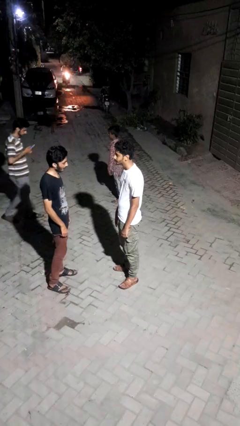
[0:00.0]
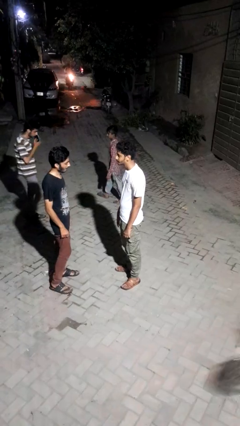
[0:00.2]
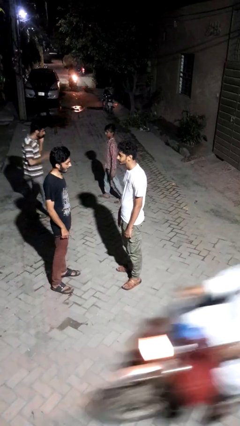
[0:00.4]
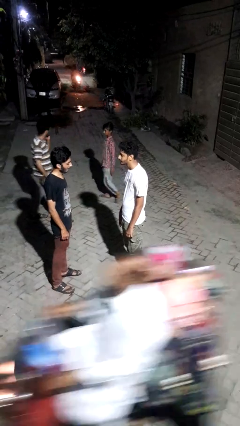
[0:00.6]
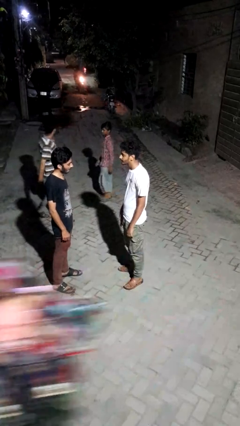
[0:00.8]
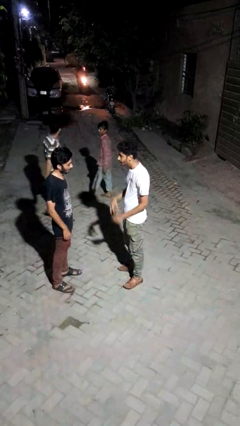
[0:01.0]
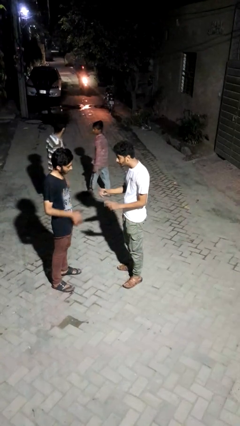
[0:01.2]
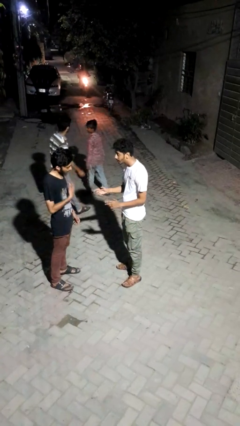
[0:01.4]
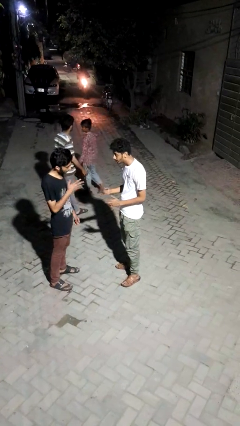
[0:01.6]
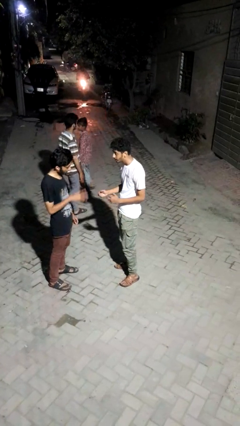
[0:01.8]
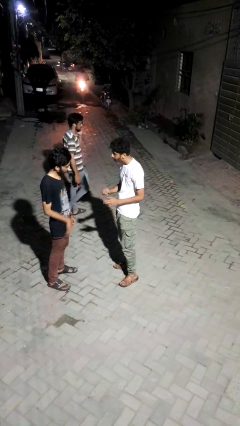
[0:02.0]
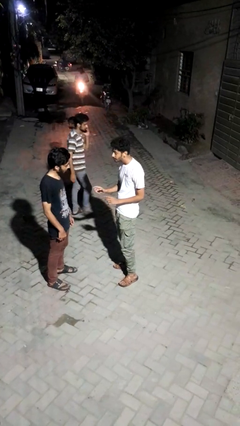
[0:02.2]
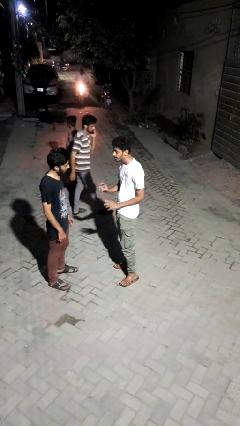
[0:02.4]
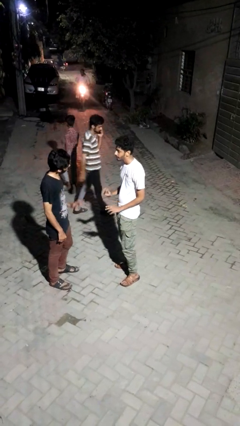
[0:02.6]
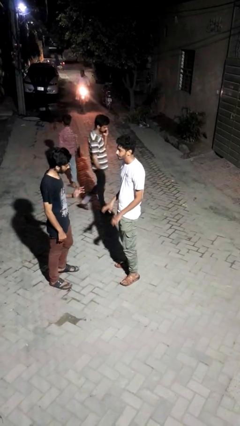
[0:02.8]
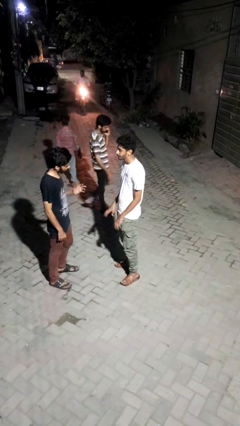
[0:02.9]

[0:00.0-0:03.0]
person talks to person

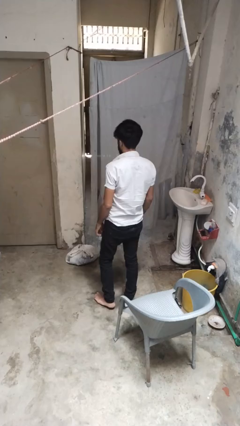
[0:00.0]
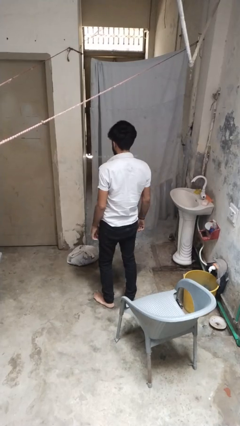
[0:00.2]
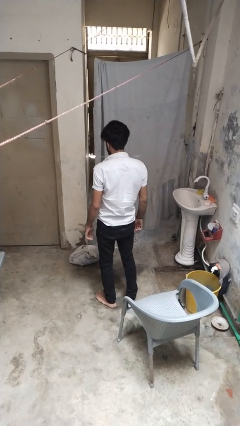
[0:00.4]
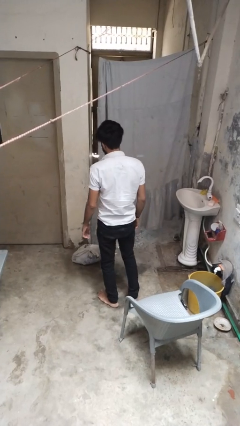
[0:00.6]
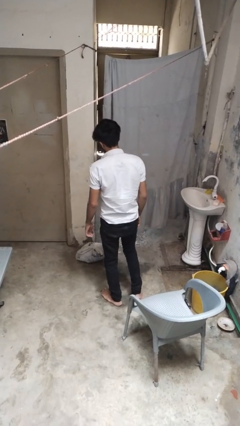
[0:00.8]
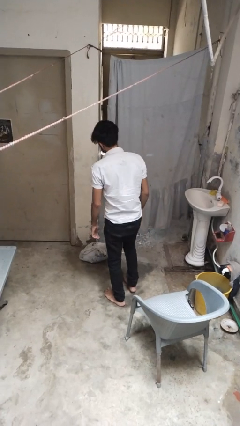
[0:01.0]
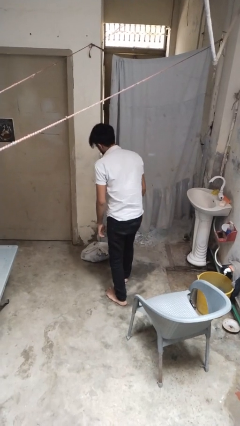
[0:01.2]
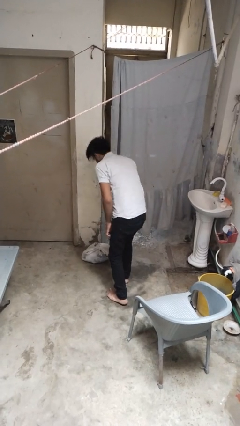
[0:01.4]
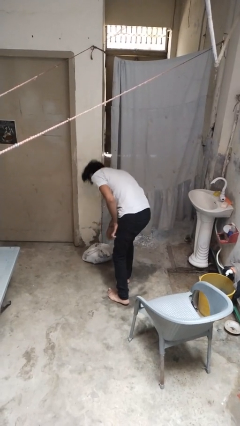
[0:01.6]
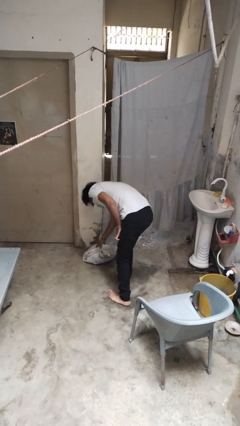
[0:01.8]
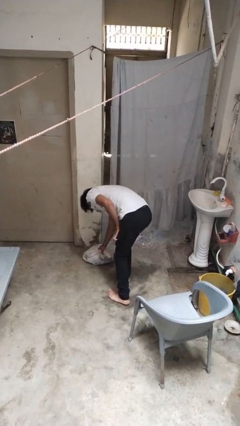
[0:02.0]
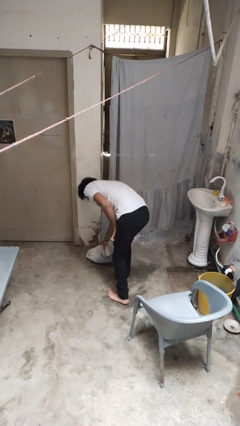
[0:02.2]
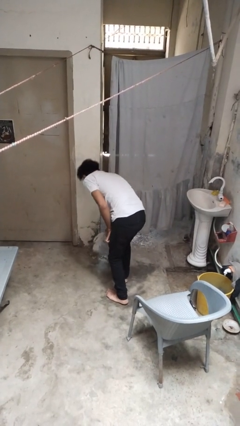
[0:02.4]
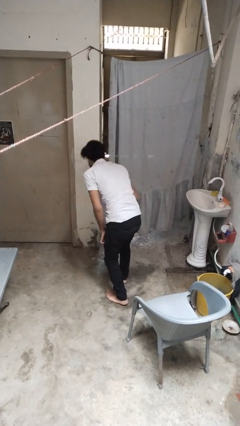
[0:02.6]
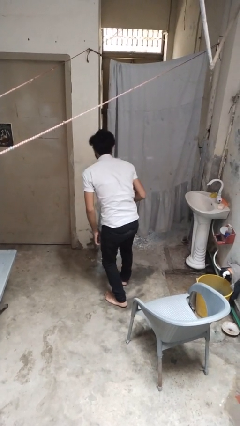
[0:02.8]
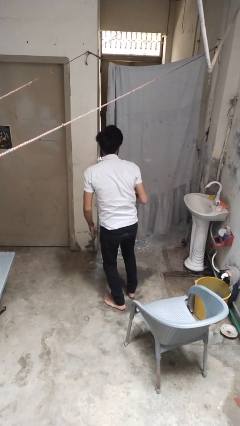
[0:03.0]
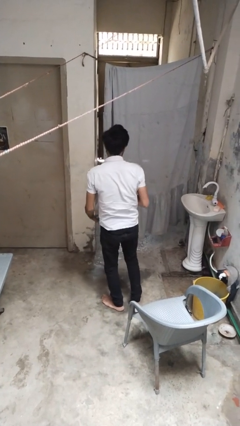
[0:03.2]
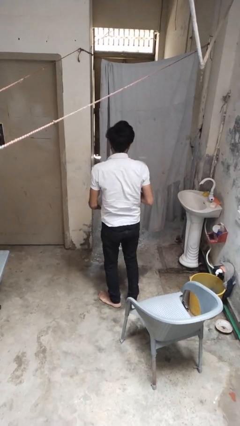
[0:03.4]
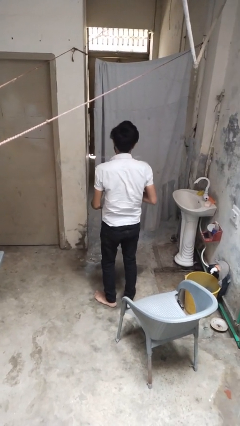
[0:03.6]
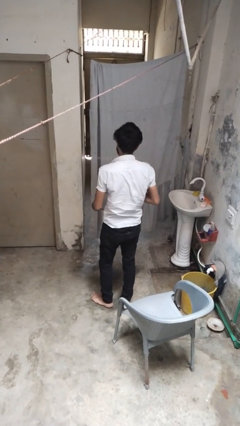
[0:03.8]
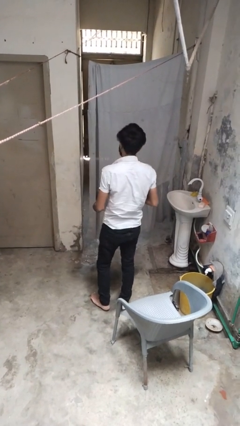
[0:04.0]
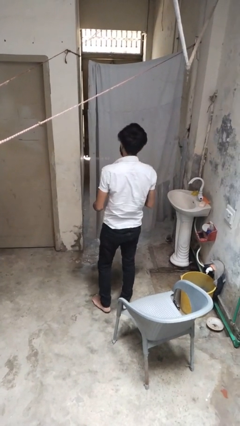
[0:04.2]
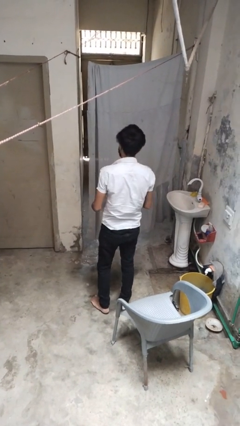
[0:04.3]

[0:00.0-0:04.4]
person picks up object from floor

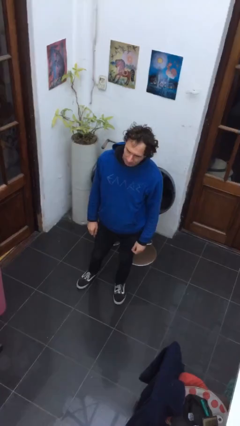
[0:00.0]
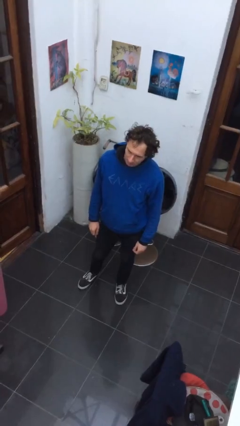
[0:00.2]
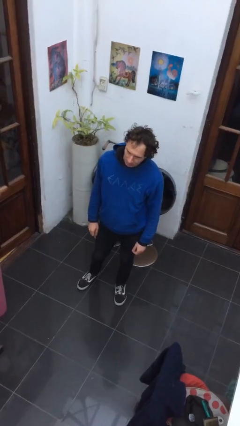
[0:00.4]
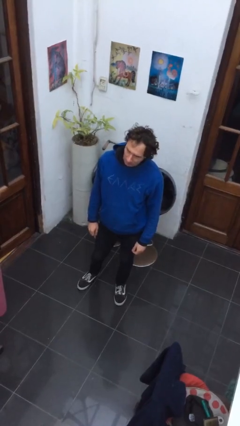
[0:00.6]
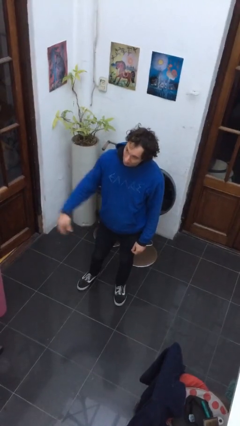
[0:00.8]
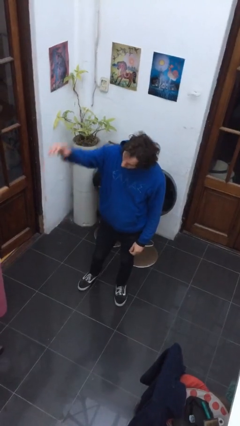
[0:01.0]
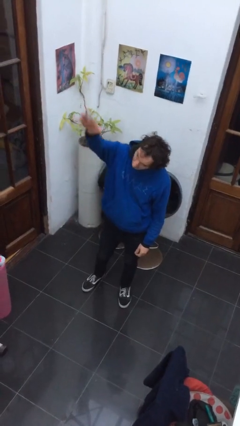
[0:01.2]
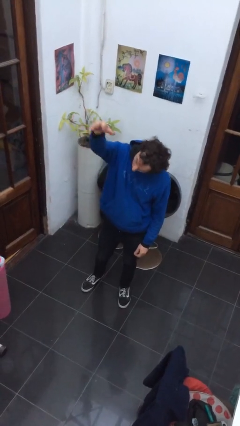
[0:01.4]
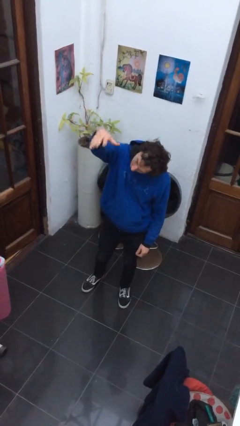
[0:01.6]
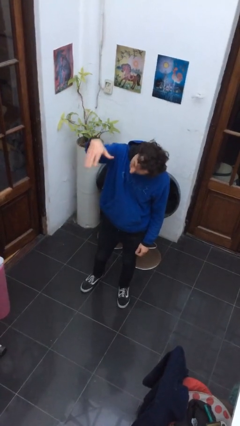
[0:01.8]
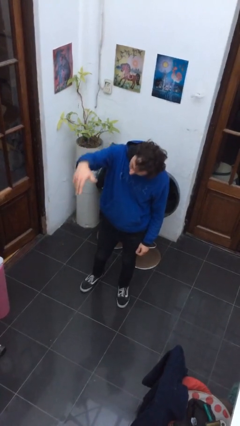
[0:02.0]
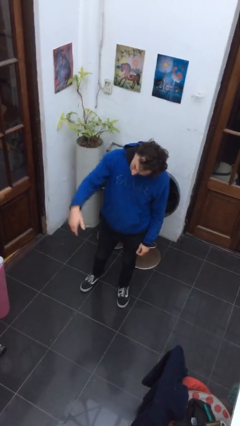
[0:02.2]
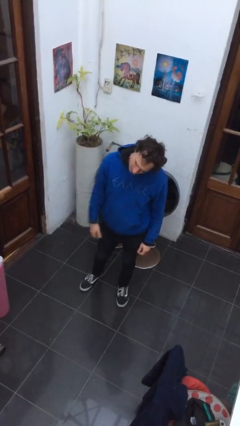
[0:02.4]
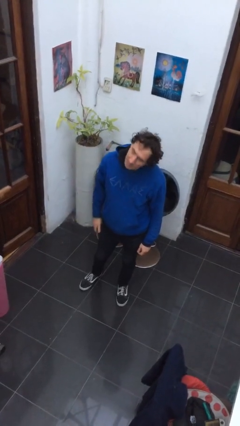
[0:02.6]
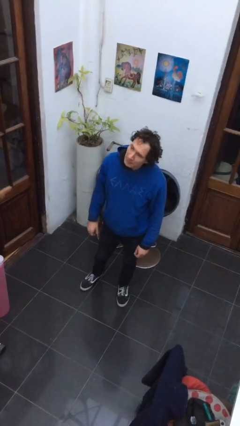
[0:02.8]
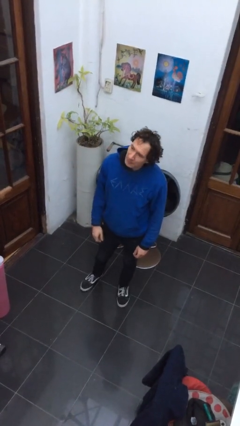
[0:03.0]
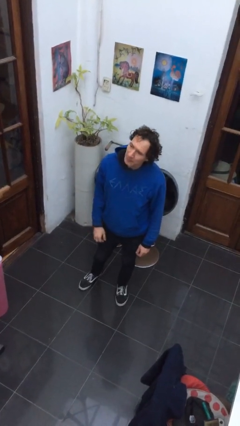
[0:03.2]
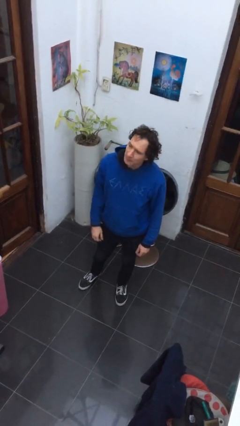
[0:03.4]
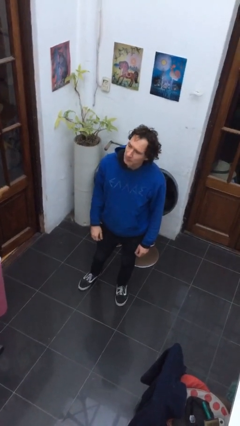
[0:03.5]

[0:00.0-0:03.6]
person gestures come here

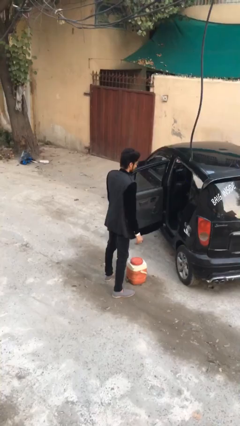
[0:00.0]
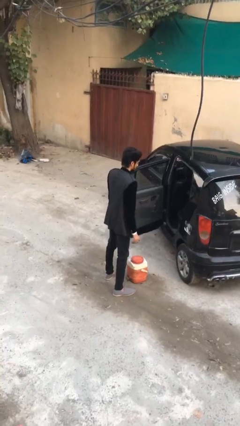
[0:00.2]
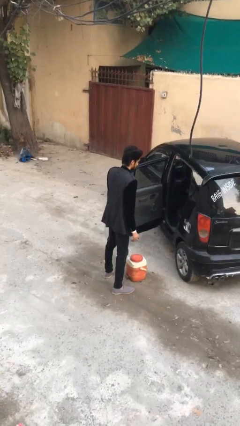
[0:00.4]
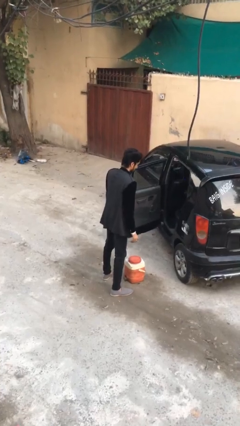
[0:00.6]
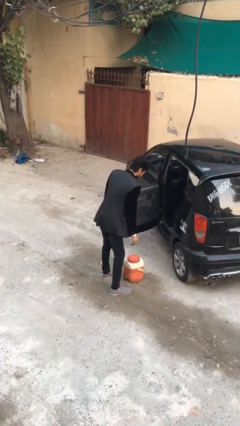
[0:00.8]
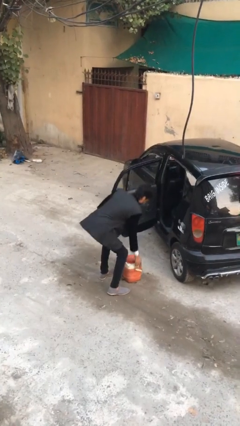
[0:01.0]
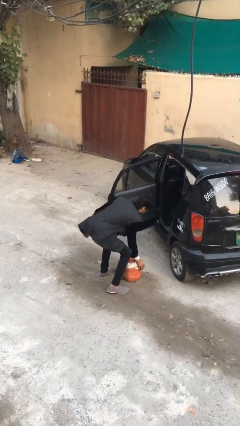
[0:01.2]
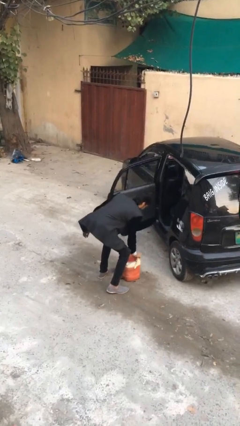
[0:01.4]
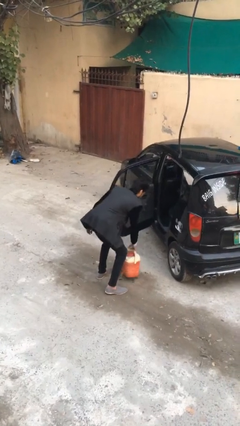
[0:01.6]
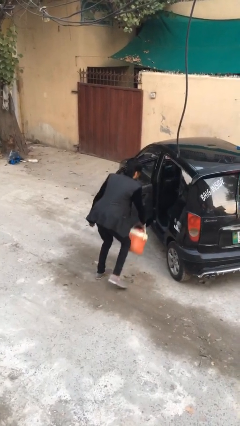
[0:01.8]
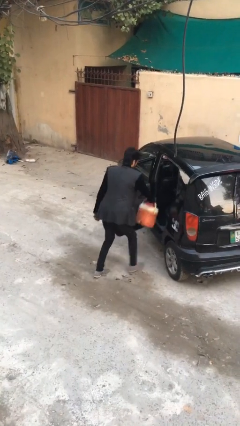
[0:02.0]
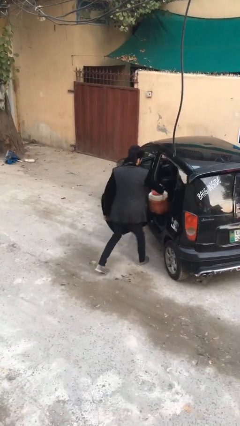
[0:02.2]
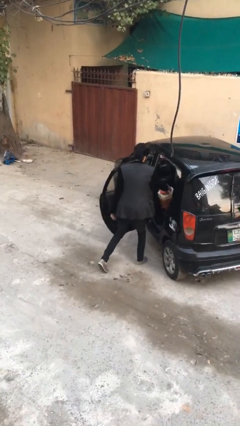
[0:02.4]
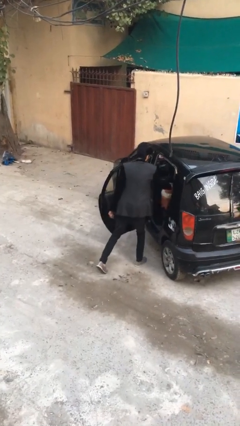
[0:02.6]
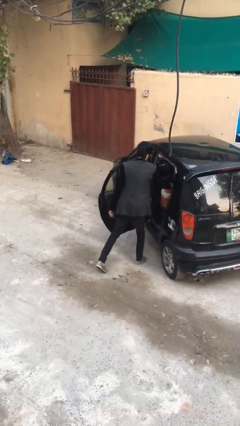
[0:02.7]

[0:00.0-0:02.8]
person loads car

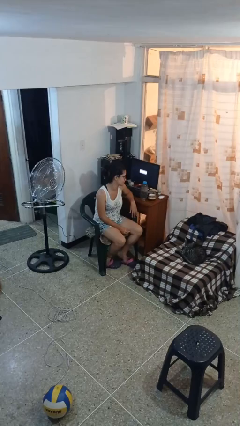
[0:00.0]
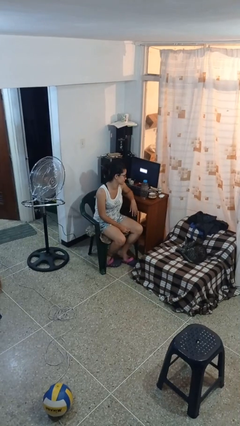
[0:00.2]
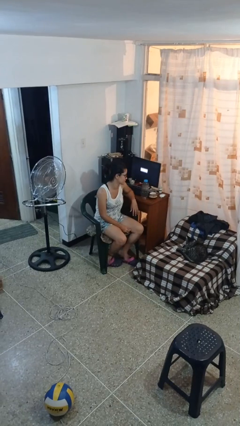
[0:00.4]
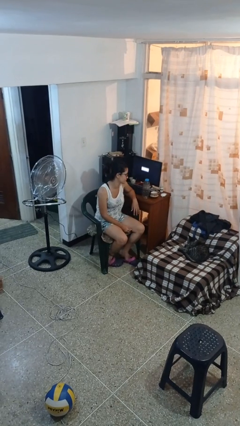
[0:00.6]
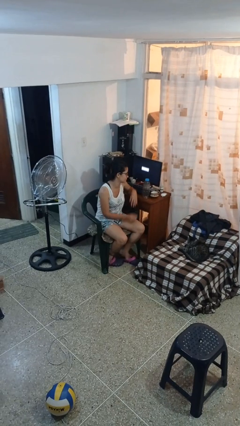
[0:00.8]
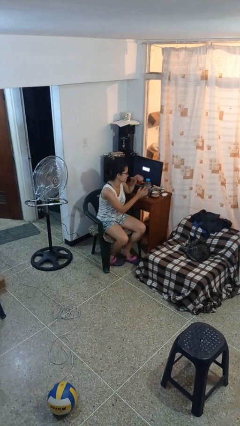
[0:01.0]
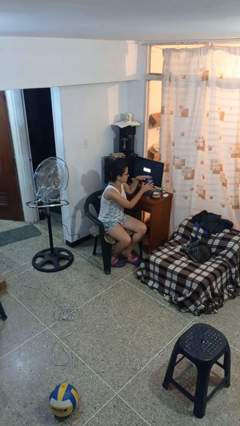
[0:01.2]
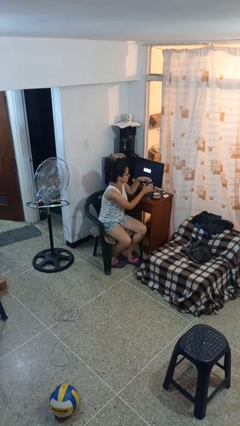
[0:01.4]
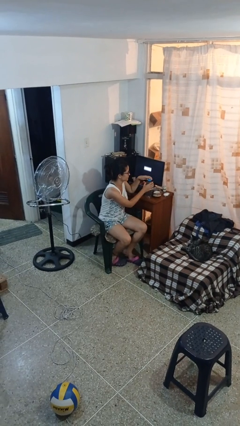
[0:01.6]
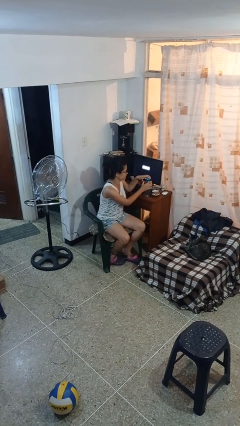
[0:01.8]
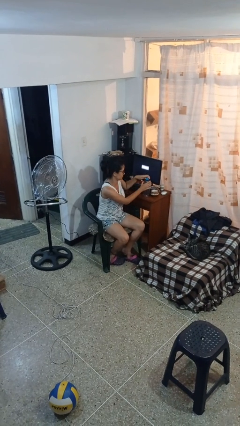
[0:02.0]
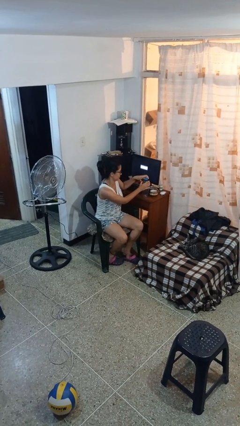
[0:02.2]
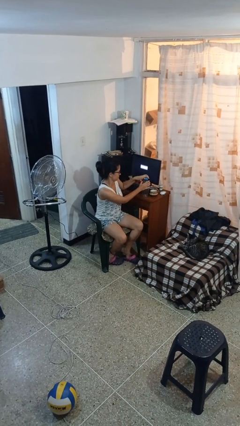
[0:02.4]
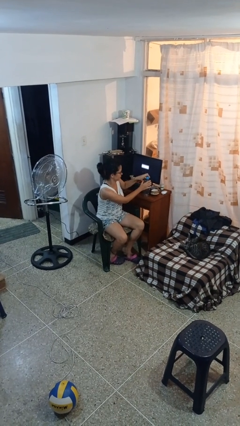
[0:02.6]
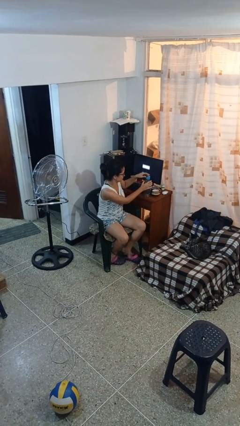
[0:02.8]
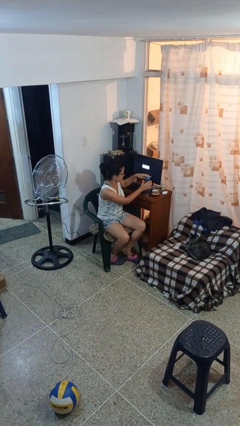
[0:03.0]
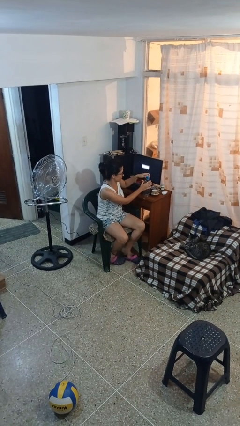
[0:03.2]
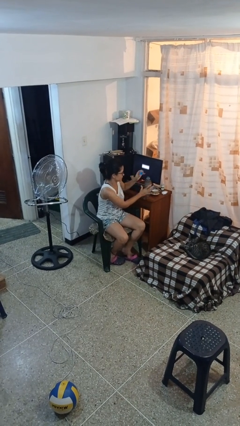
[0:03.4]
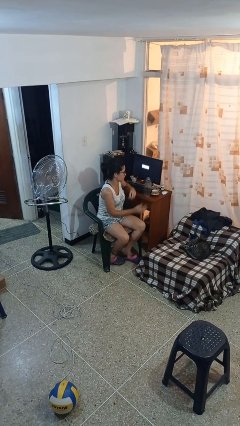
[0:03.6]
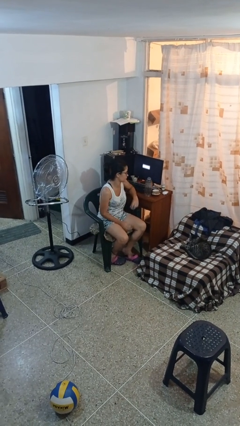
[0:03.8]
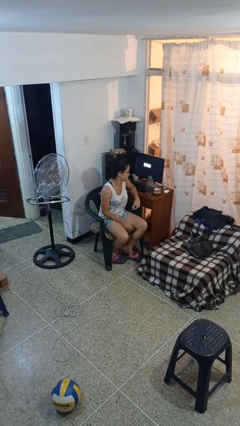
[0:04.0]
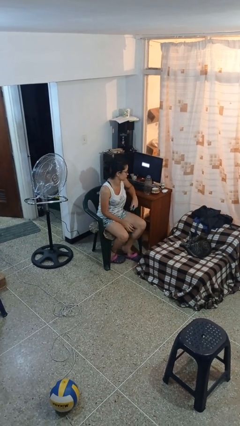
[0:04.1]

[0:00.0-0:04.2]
person unscrews lid from bottle
